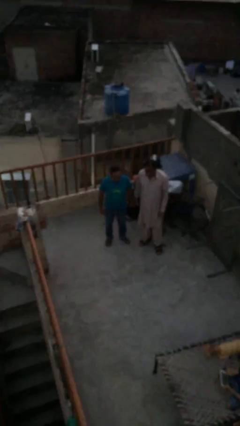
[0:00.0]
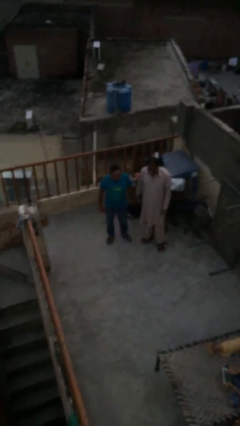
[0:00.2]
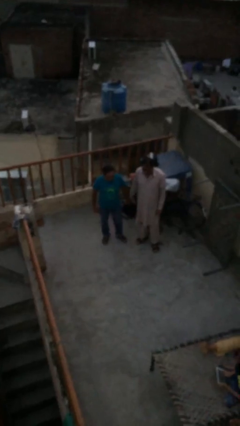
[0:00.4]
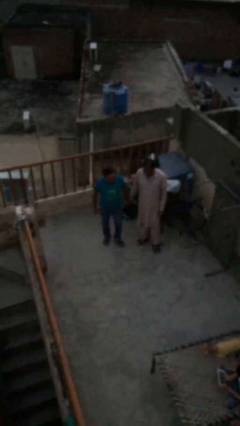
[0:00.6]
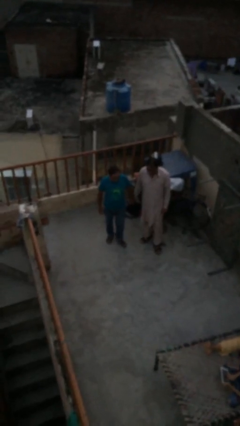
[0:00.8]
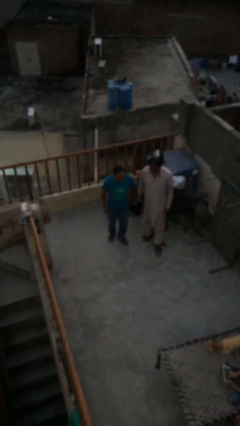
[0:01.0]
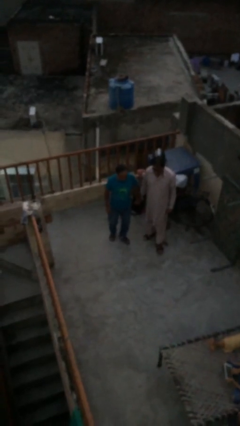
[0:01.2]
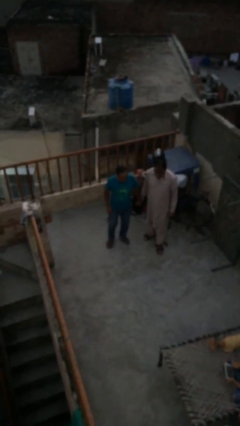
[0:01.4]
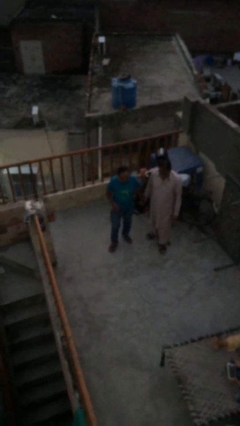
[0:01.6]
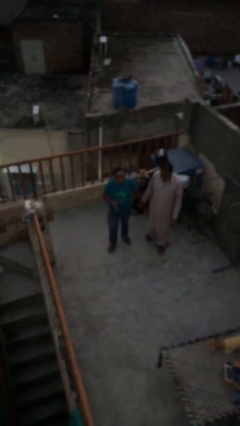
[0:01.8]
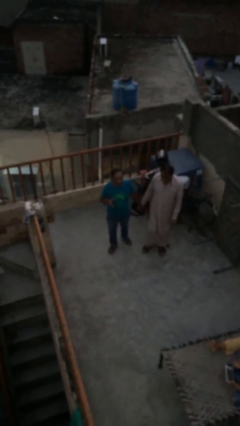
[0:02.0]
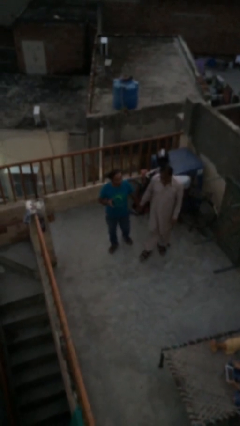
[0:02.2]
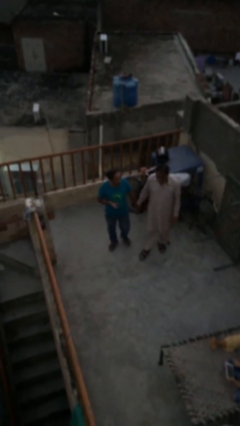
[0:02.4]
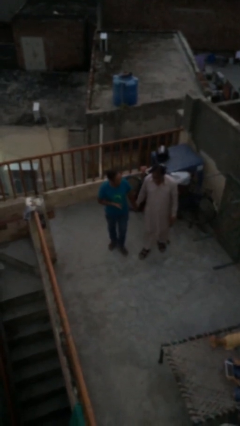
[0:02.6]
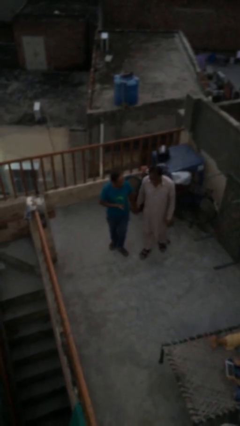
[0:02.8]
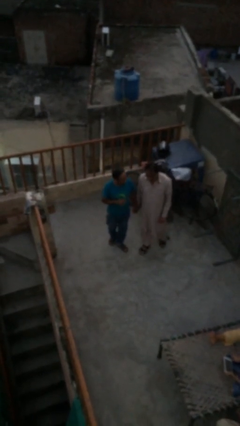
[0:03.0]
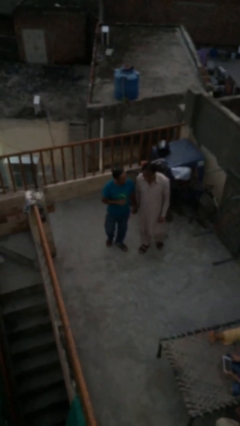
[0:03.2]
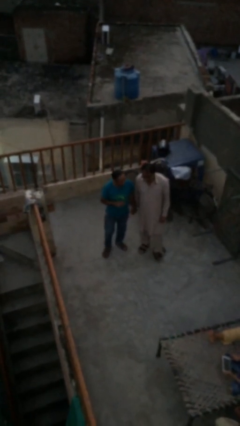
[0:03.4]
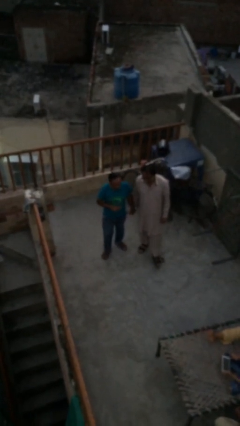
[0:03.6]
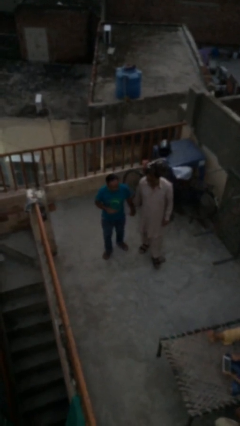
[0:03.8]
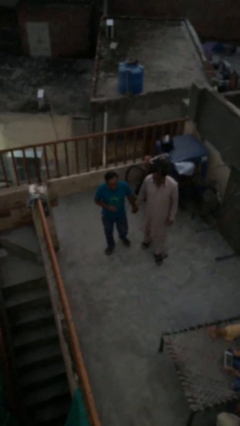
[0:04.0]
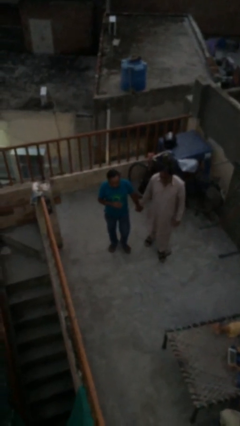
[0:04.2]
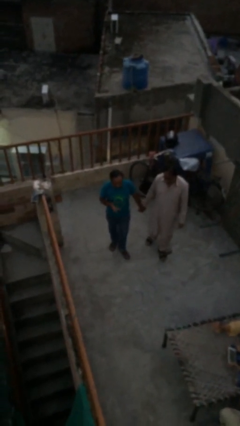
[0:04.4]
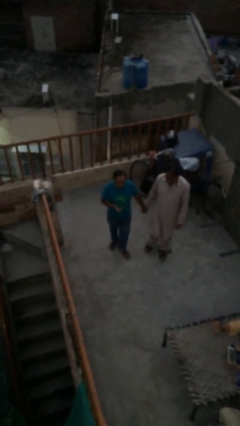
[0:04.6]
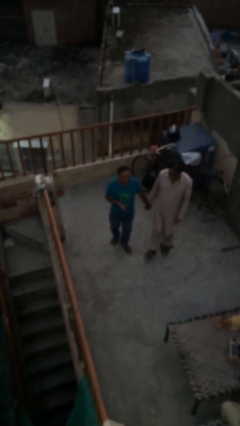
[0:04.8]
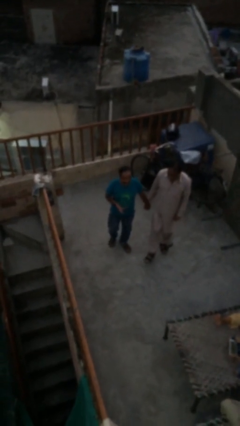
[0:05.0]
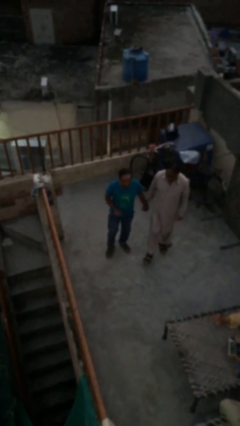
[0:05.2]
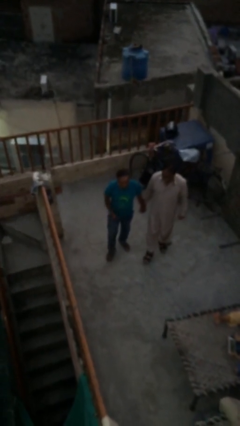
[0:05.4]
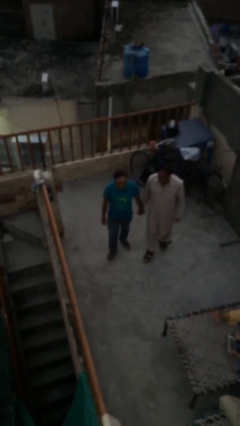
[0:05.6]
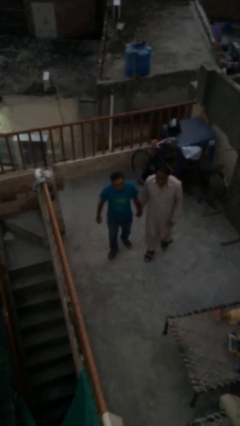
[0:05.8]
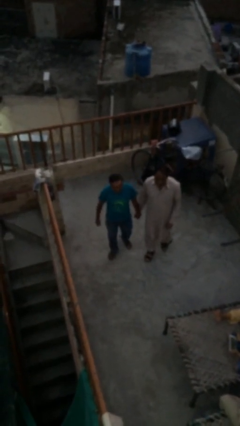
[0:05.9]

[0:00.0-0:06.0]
person holds hand

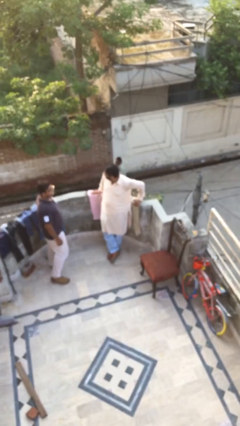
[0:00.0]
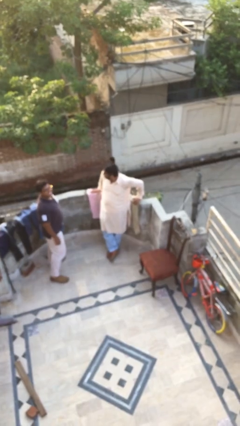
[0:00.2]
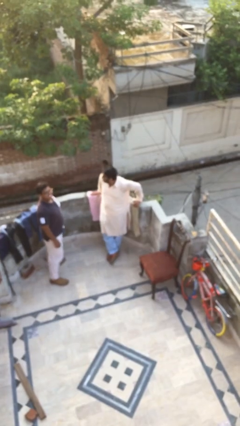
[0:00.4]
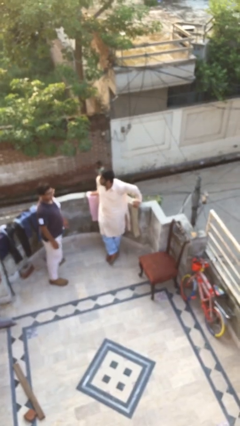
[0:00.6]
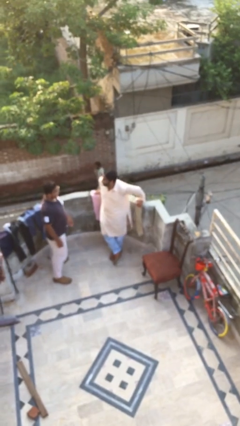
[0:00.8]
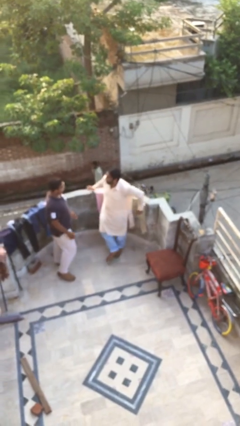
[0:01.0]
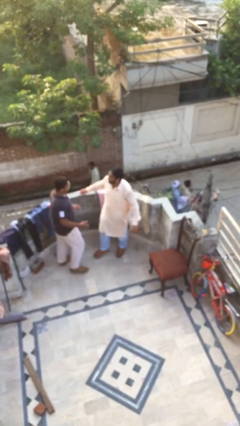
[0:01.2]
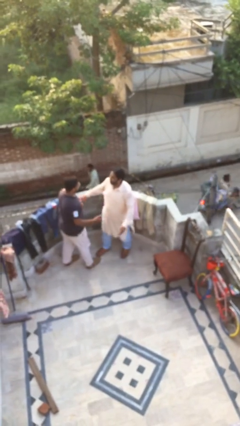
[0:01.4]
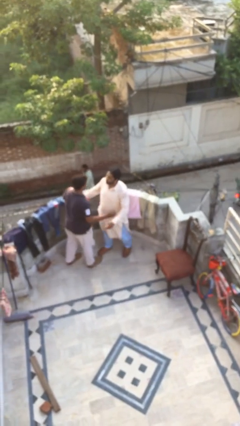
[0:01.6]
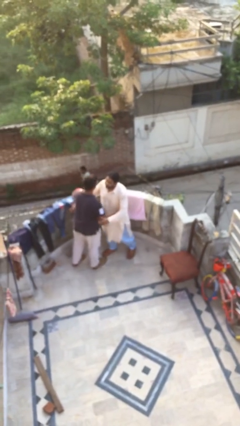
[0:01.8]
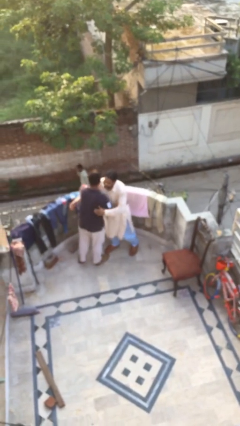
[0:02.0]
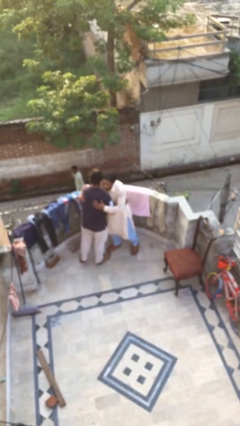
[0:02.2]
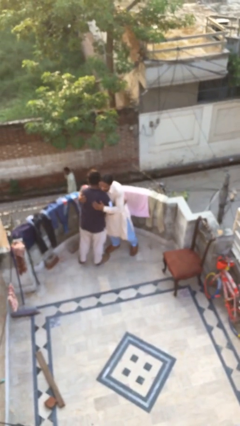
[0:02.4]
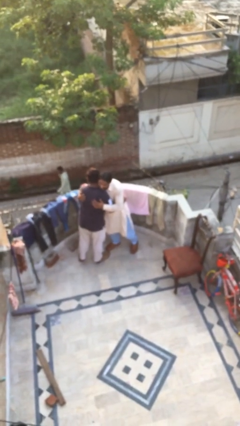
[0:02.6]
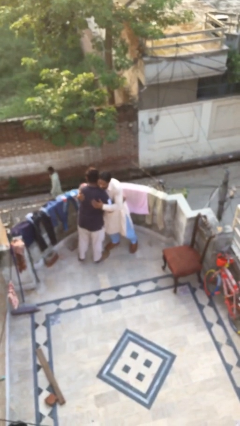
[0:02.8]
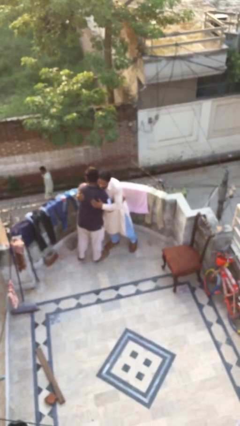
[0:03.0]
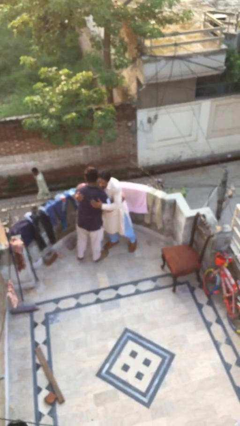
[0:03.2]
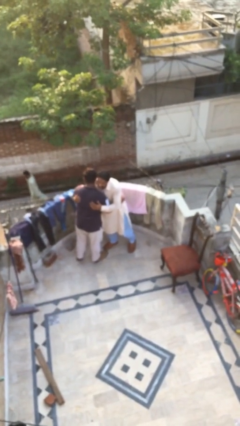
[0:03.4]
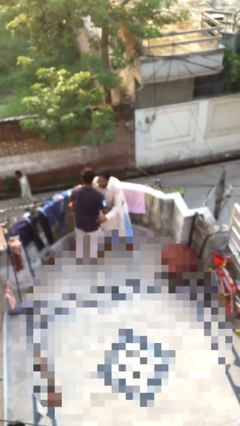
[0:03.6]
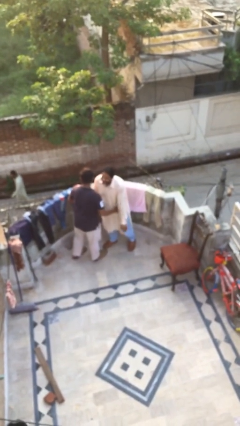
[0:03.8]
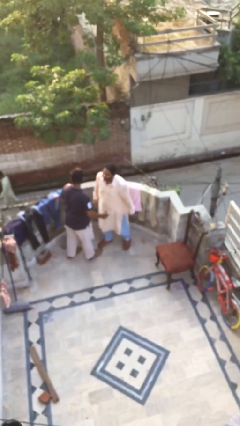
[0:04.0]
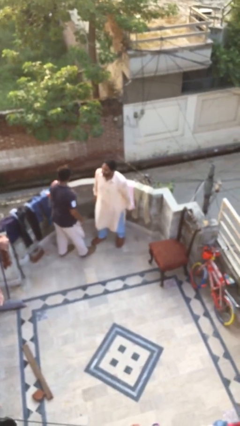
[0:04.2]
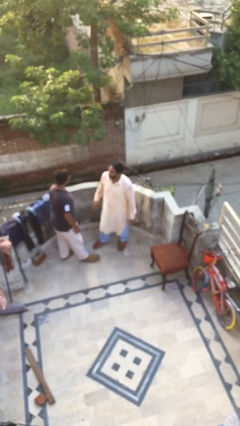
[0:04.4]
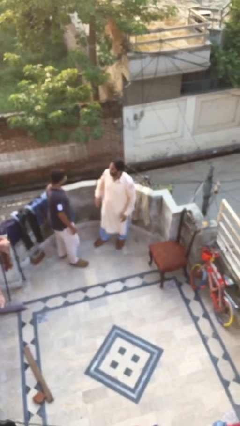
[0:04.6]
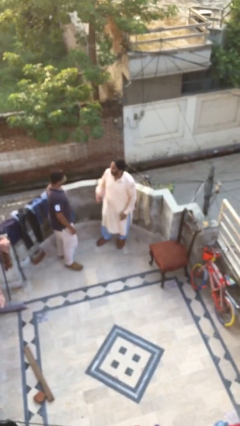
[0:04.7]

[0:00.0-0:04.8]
person embraces person

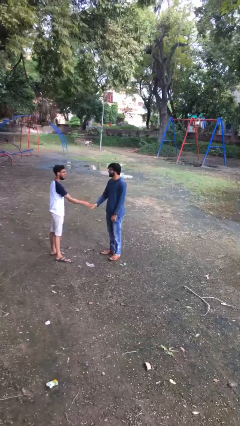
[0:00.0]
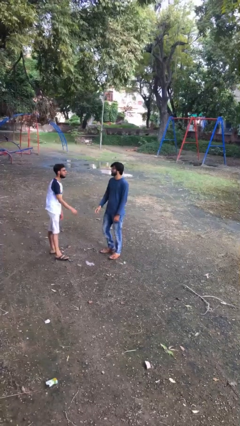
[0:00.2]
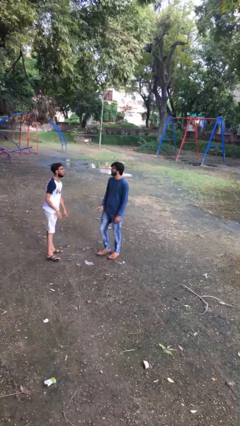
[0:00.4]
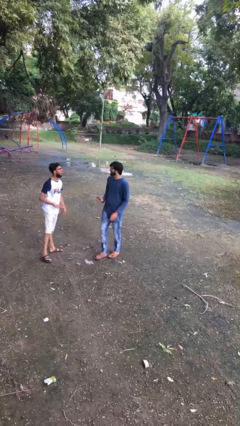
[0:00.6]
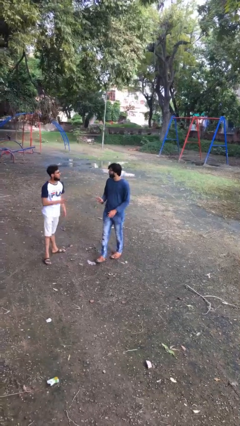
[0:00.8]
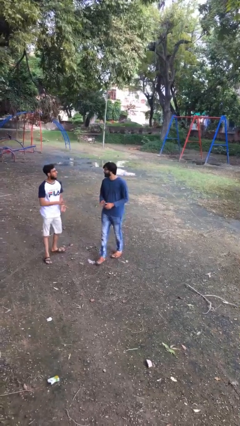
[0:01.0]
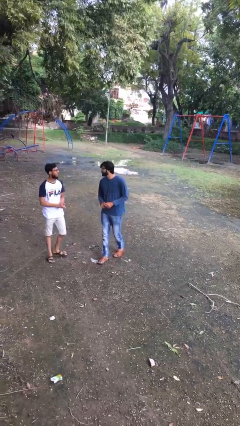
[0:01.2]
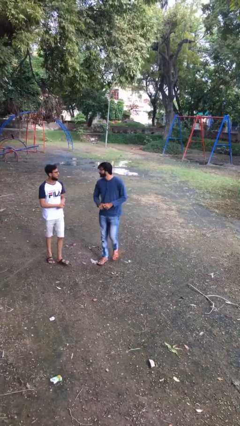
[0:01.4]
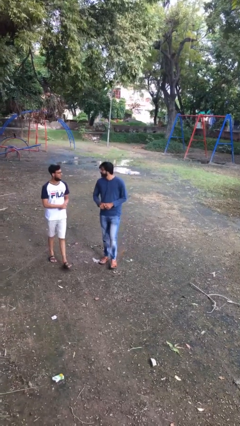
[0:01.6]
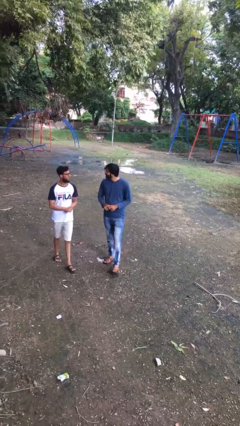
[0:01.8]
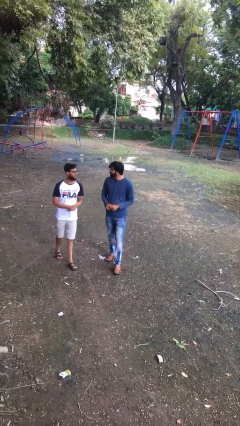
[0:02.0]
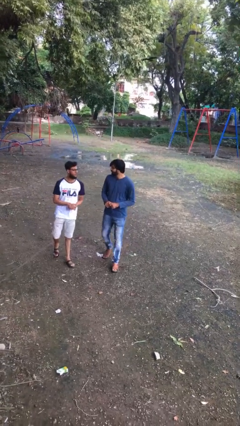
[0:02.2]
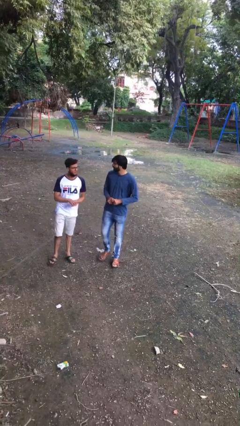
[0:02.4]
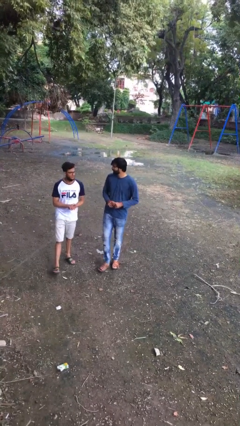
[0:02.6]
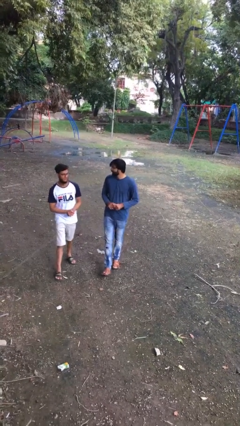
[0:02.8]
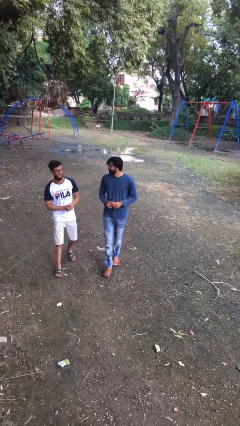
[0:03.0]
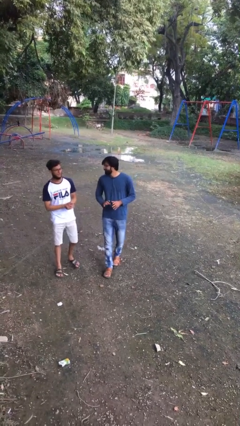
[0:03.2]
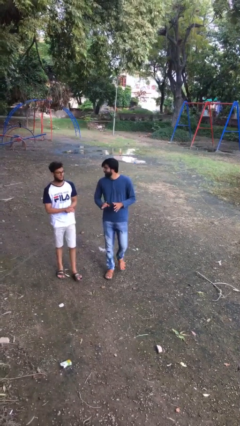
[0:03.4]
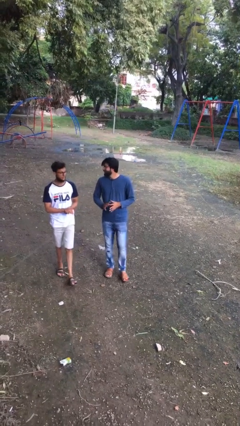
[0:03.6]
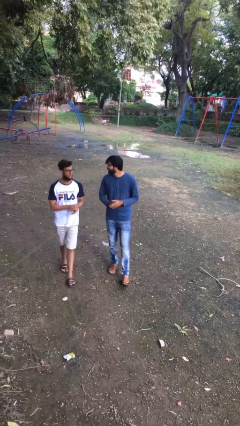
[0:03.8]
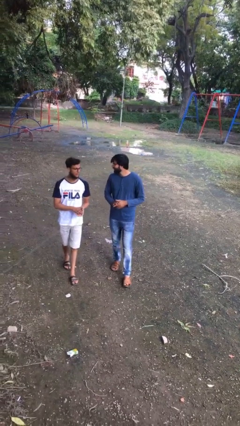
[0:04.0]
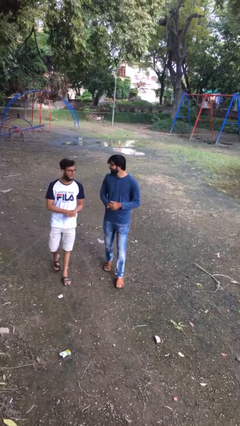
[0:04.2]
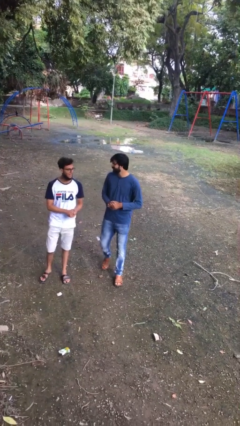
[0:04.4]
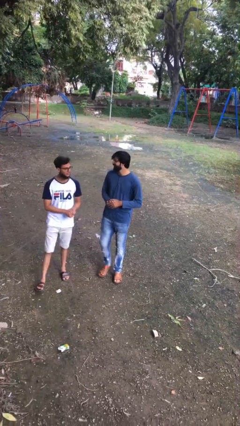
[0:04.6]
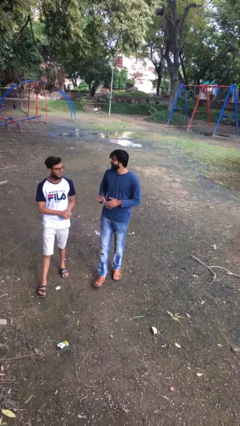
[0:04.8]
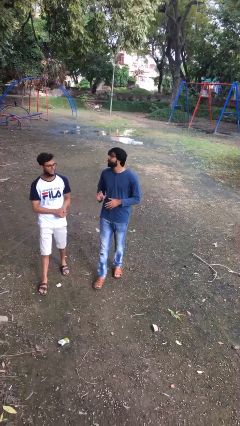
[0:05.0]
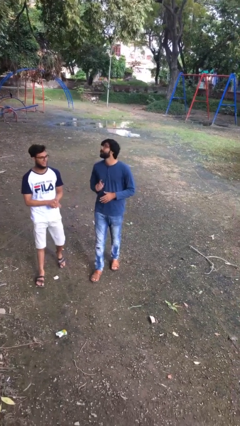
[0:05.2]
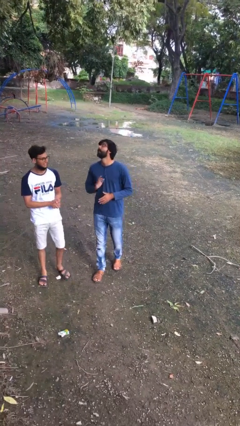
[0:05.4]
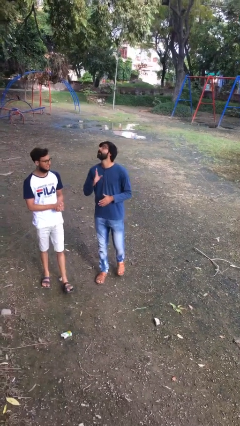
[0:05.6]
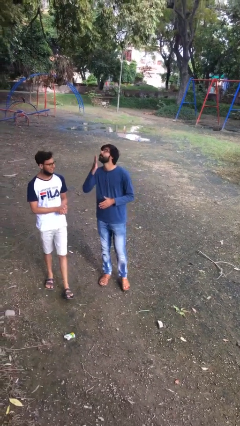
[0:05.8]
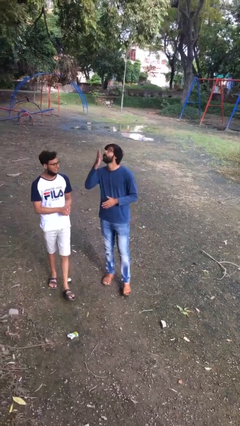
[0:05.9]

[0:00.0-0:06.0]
person talks to person

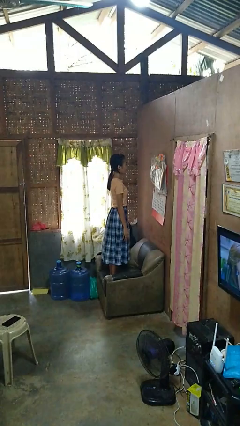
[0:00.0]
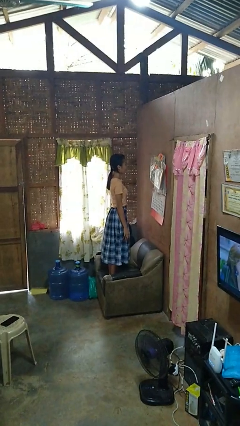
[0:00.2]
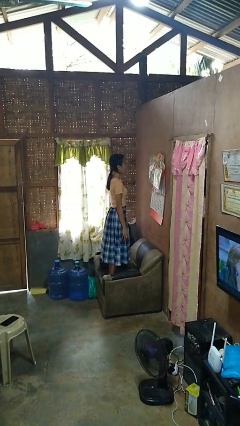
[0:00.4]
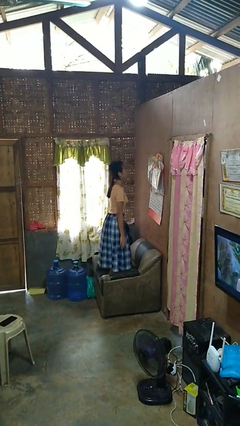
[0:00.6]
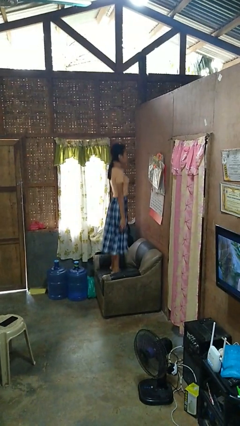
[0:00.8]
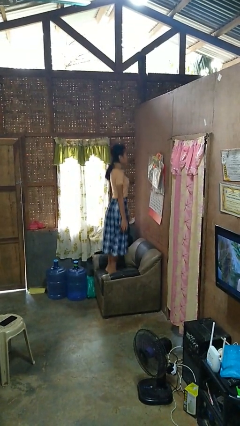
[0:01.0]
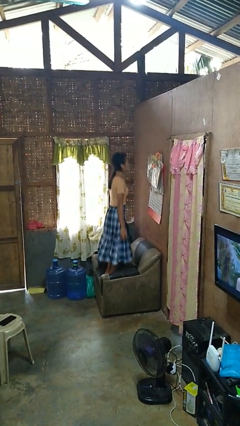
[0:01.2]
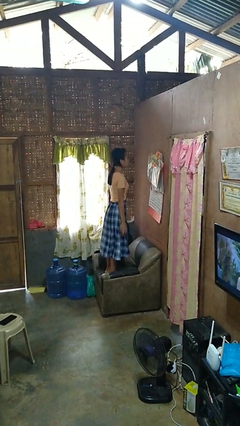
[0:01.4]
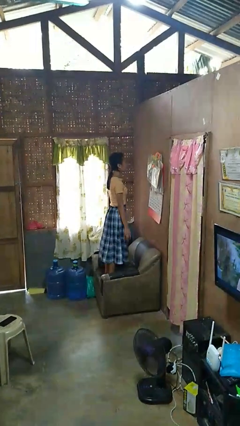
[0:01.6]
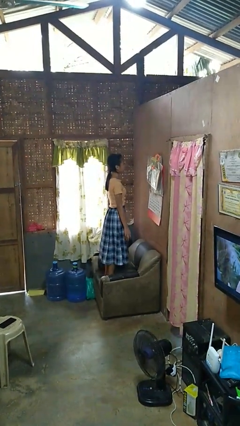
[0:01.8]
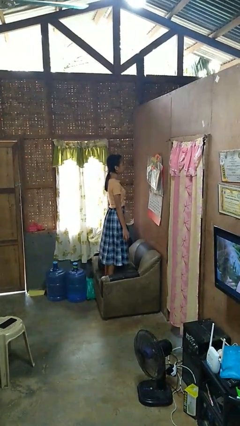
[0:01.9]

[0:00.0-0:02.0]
person jumps on couch
